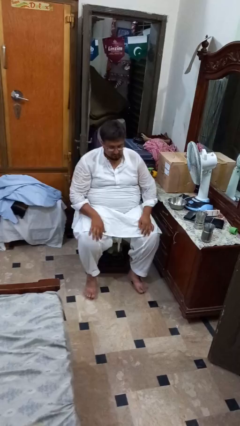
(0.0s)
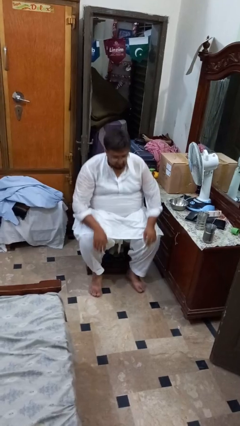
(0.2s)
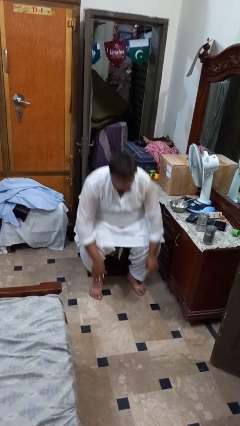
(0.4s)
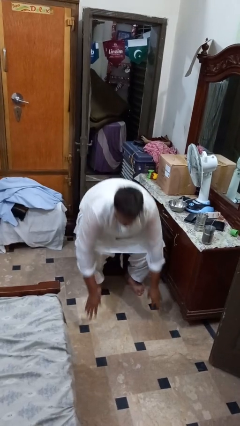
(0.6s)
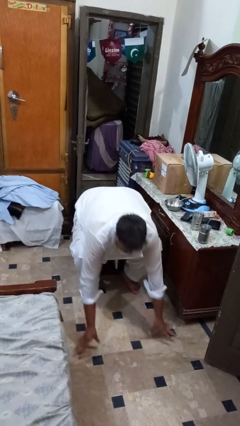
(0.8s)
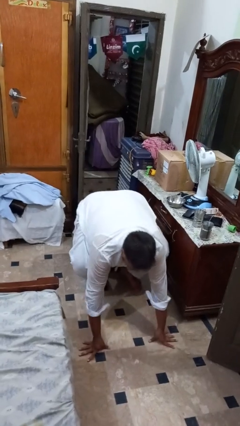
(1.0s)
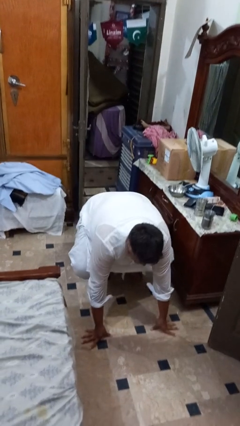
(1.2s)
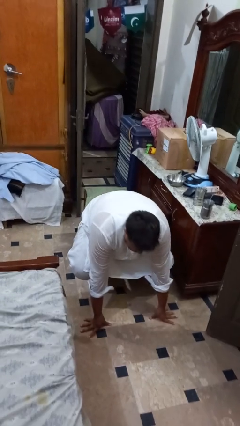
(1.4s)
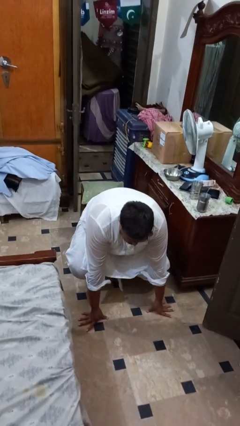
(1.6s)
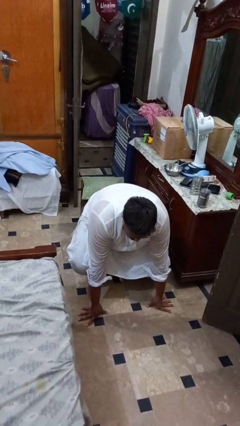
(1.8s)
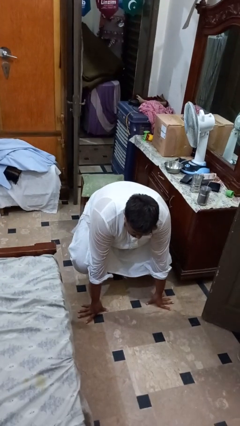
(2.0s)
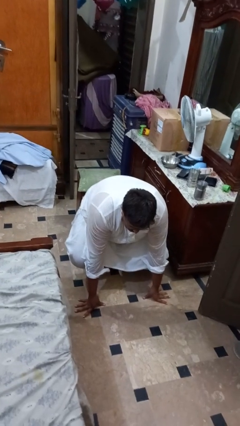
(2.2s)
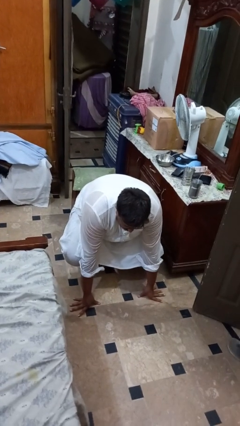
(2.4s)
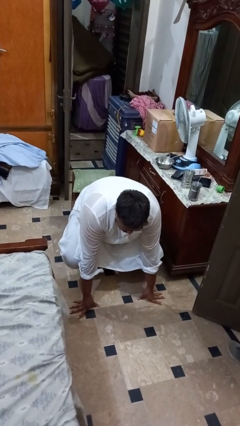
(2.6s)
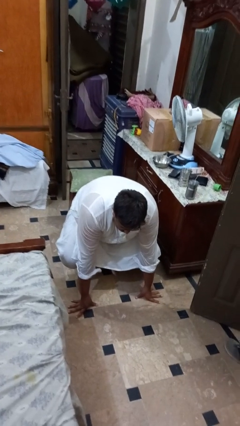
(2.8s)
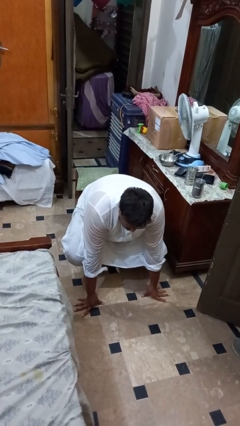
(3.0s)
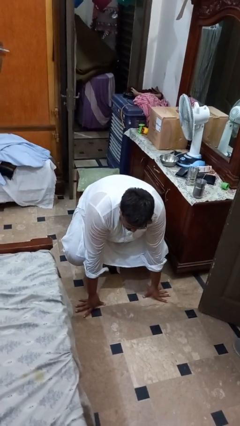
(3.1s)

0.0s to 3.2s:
person falls from chair

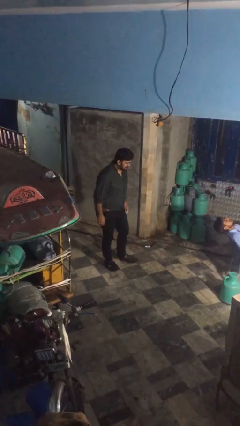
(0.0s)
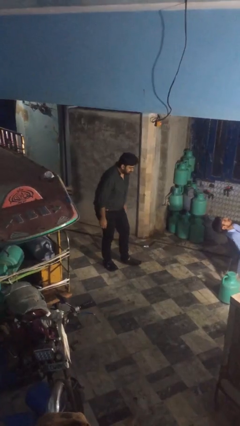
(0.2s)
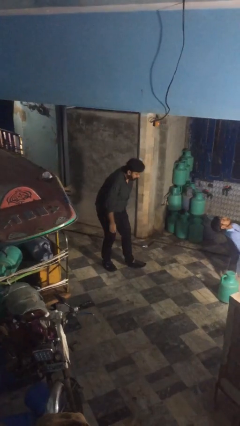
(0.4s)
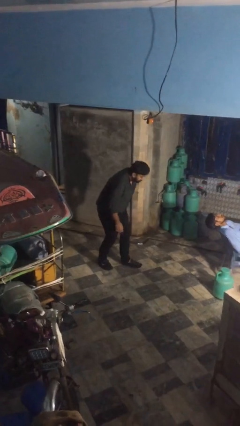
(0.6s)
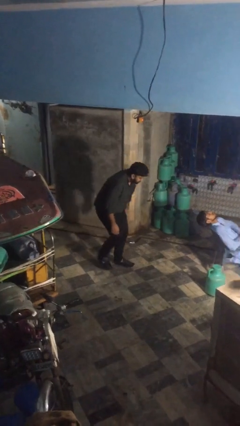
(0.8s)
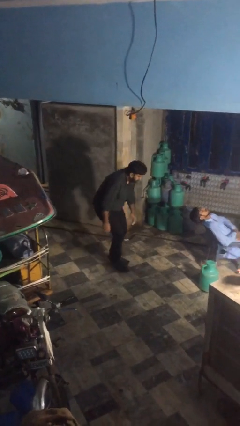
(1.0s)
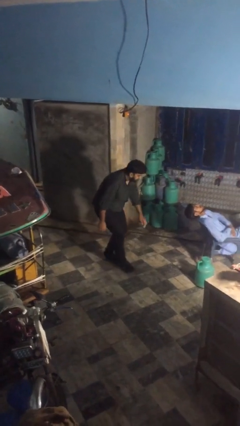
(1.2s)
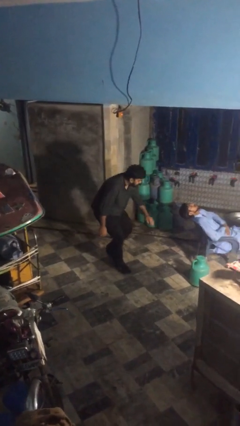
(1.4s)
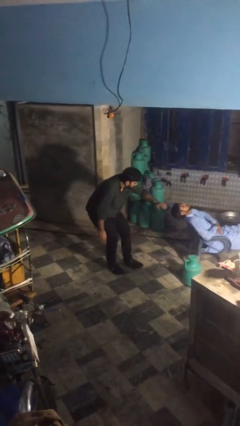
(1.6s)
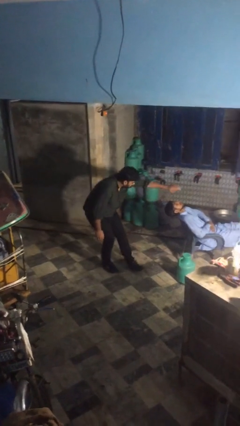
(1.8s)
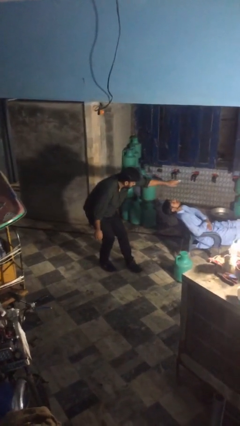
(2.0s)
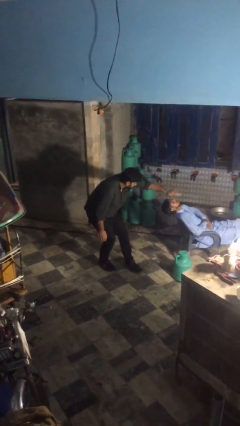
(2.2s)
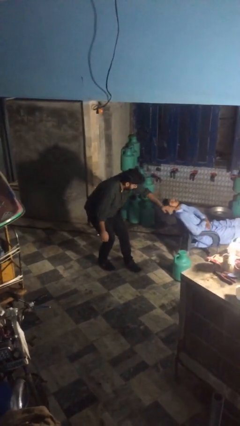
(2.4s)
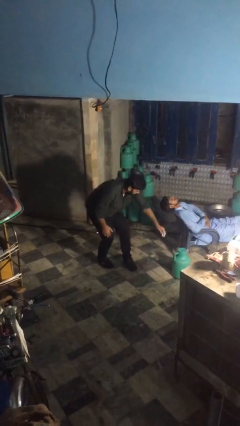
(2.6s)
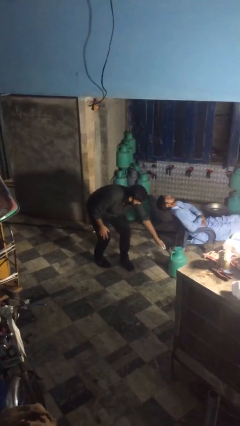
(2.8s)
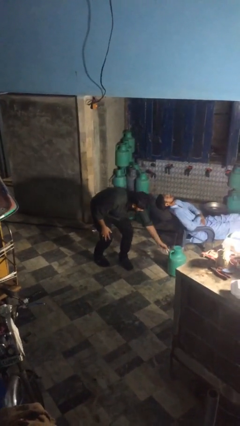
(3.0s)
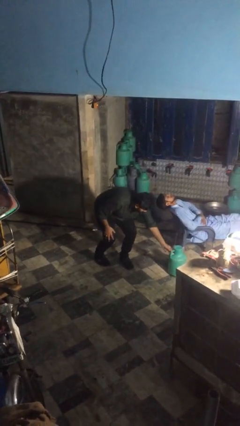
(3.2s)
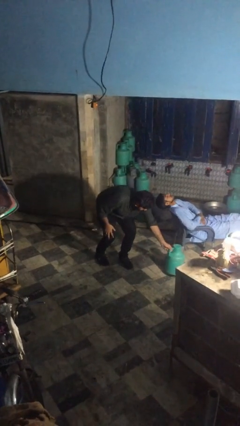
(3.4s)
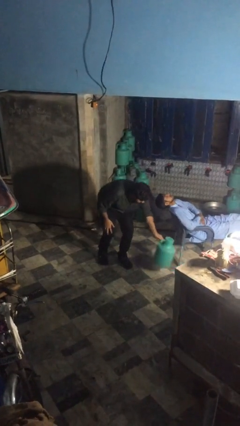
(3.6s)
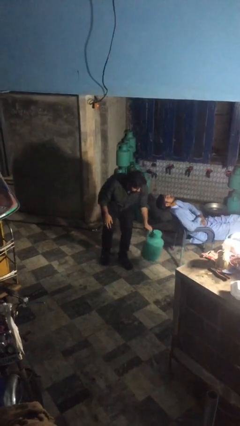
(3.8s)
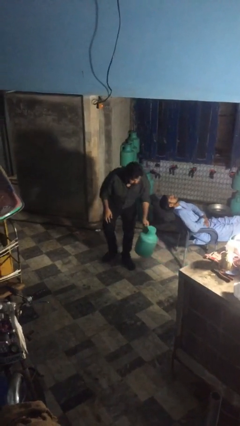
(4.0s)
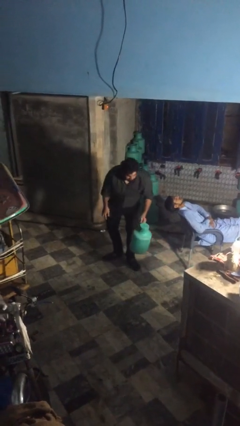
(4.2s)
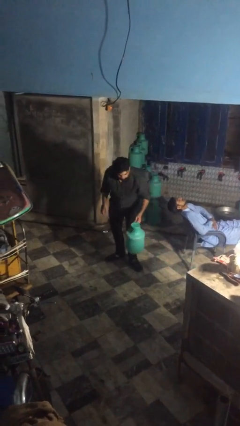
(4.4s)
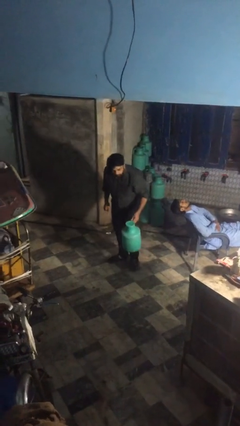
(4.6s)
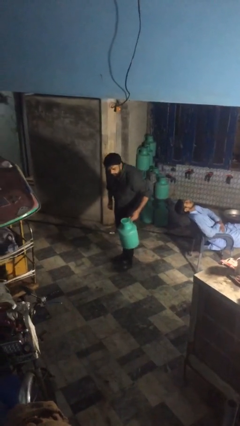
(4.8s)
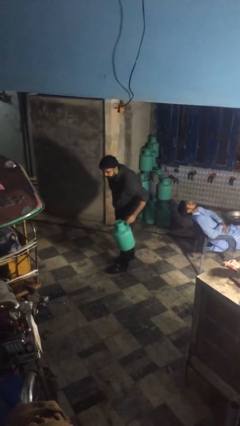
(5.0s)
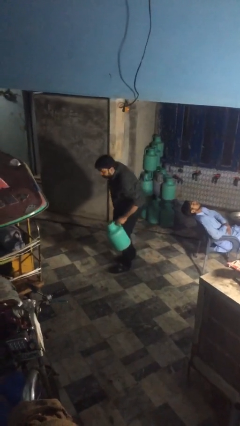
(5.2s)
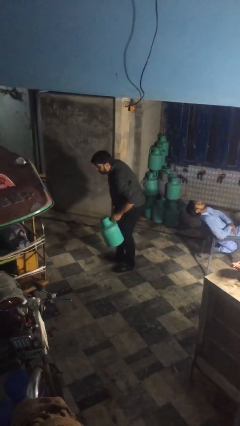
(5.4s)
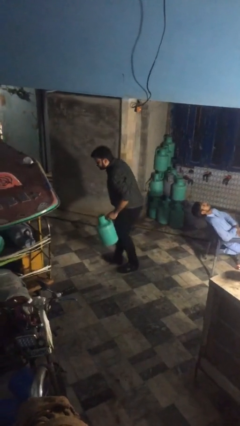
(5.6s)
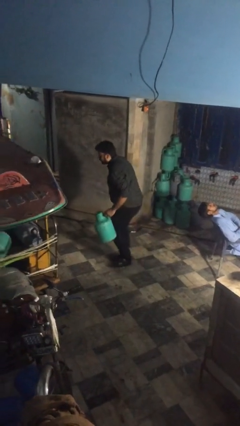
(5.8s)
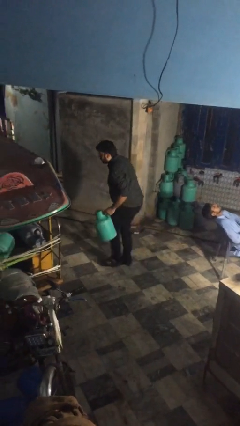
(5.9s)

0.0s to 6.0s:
person steals object from person

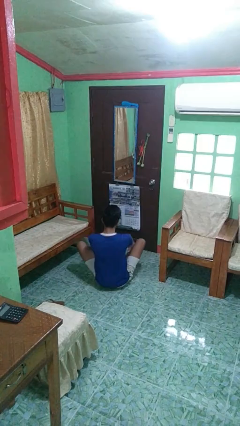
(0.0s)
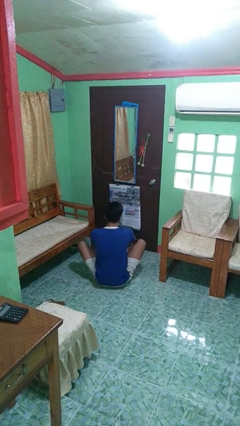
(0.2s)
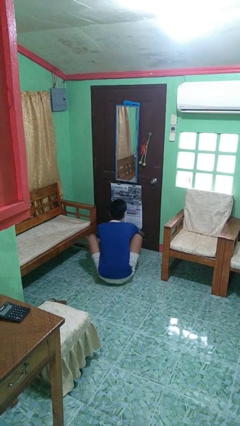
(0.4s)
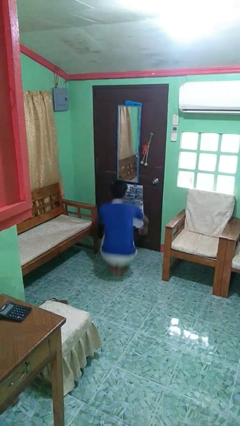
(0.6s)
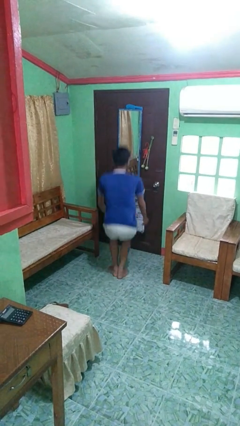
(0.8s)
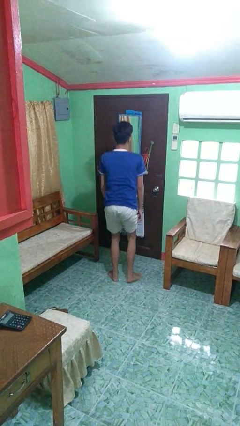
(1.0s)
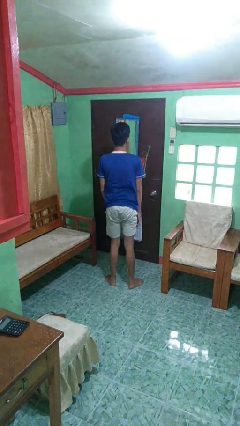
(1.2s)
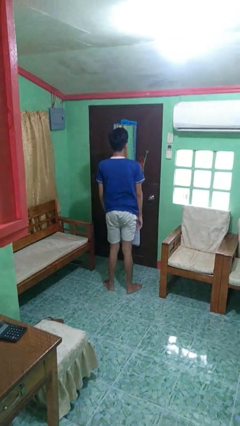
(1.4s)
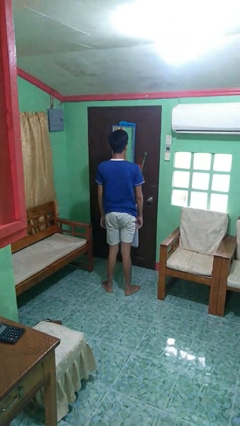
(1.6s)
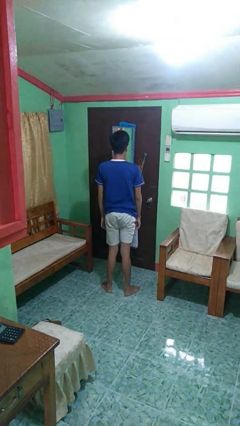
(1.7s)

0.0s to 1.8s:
person stands up from floor

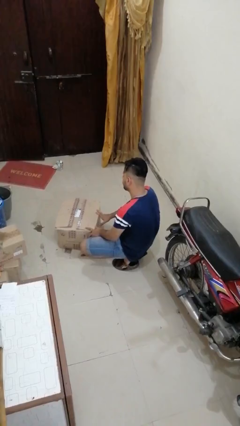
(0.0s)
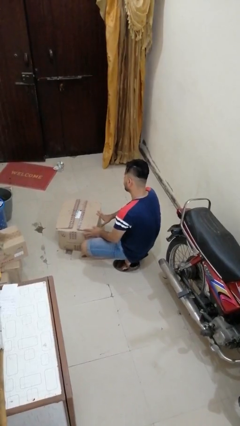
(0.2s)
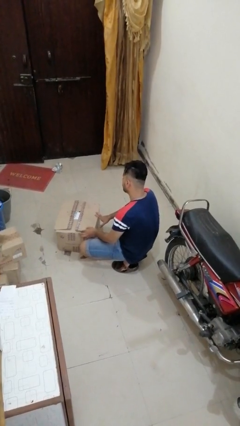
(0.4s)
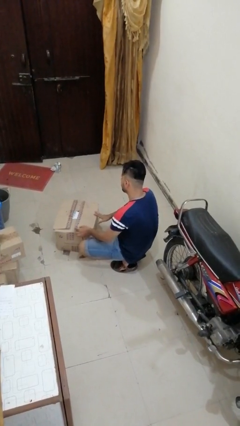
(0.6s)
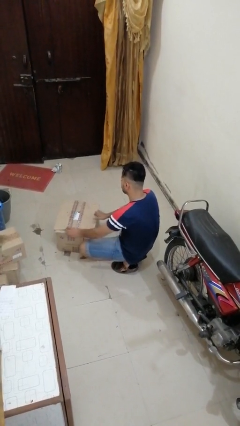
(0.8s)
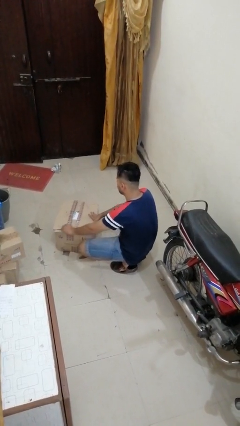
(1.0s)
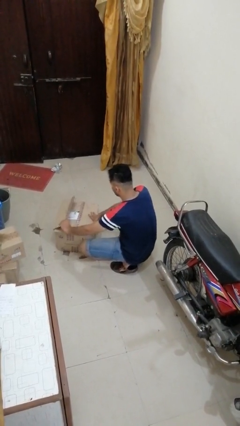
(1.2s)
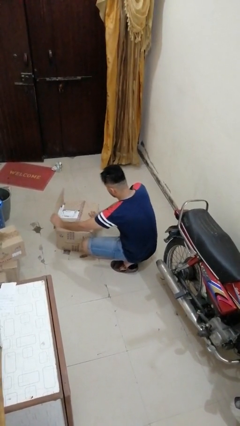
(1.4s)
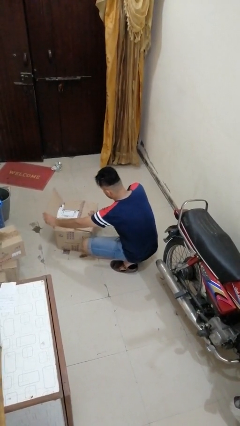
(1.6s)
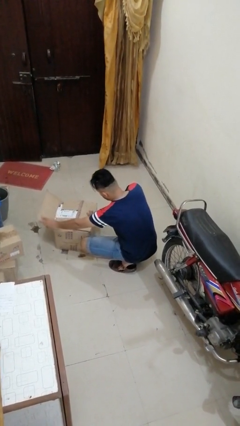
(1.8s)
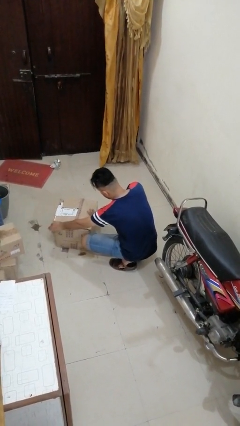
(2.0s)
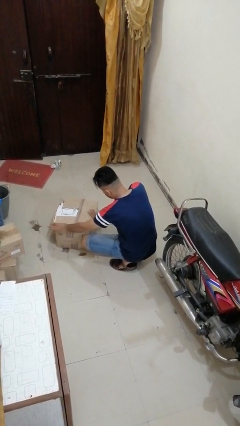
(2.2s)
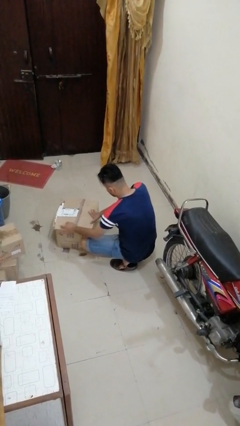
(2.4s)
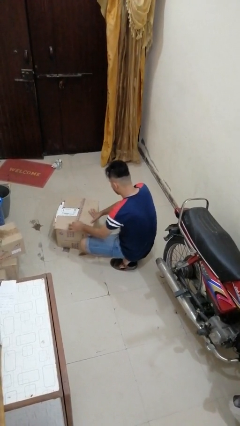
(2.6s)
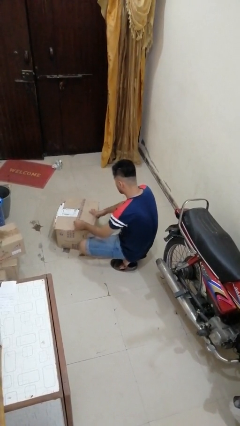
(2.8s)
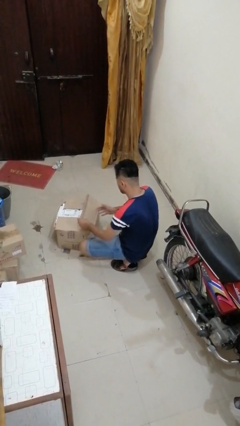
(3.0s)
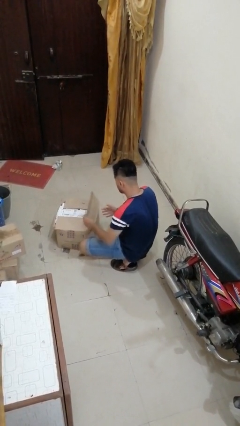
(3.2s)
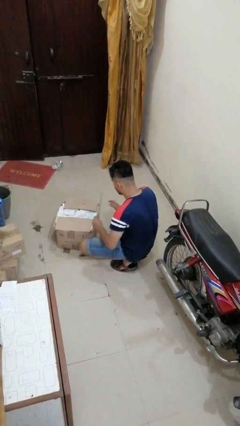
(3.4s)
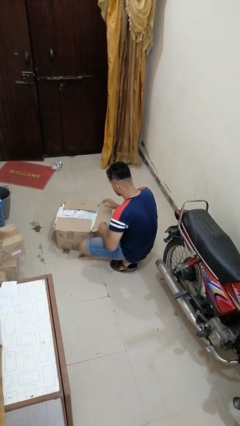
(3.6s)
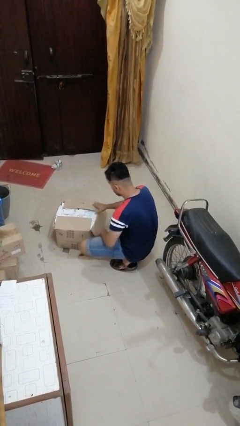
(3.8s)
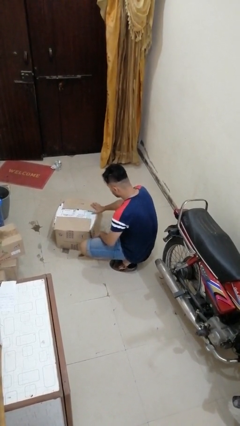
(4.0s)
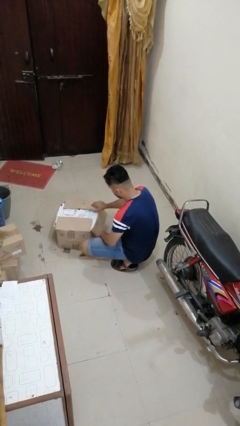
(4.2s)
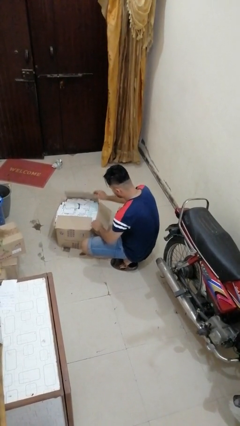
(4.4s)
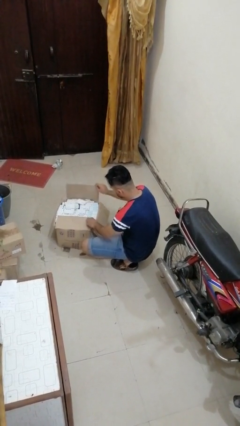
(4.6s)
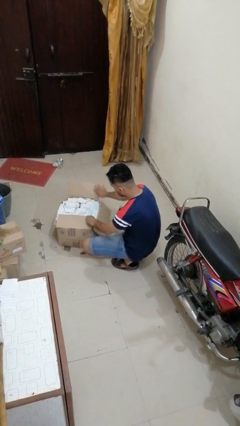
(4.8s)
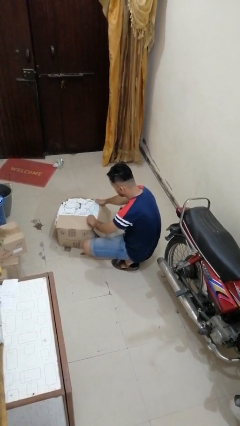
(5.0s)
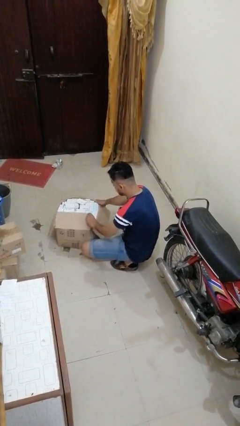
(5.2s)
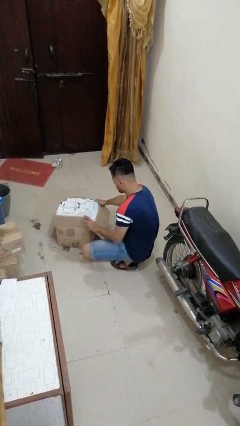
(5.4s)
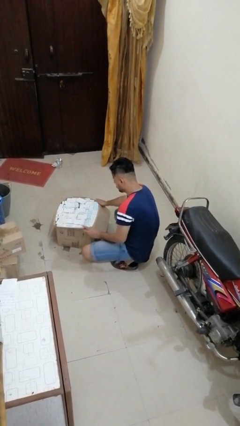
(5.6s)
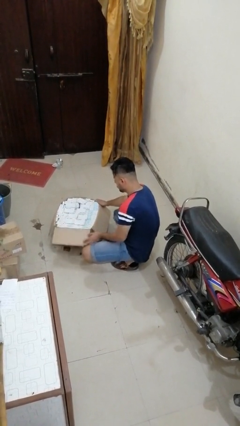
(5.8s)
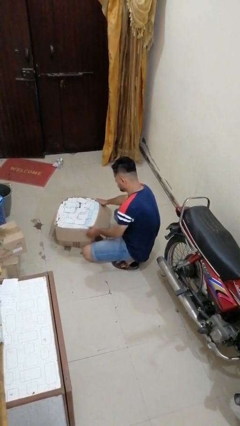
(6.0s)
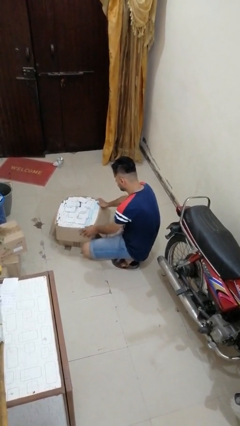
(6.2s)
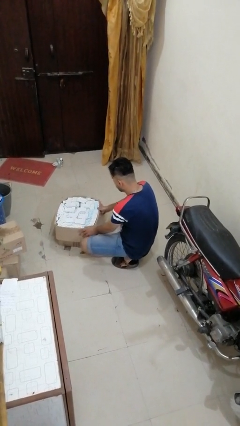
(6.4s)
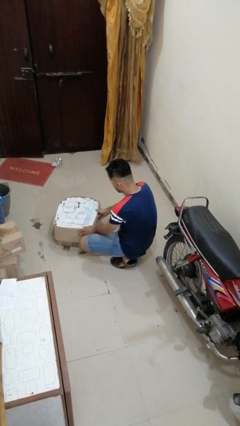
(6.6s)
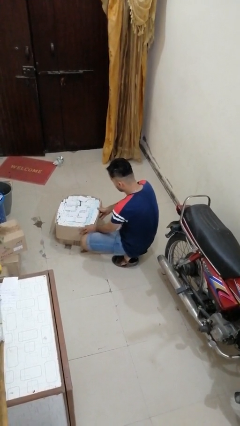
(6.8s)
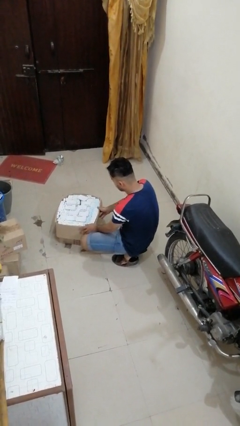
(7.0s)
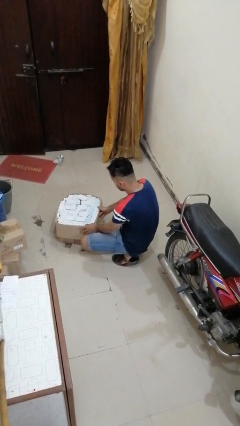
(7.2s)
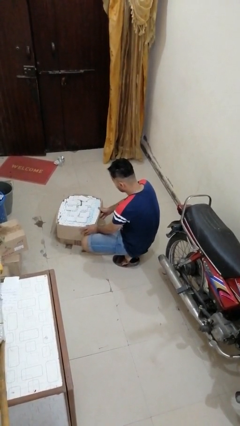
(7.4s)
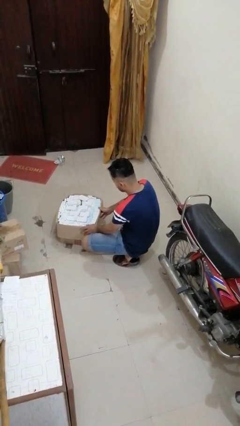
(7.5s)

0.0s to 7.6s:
person opens box
